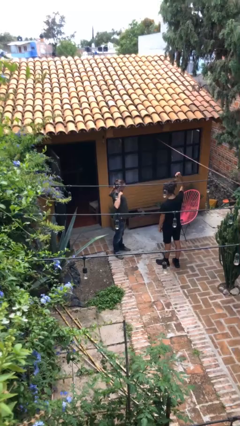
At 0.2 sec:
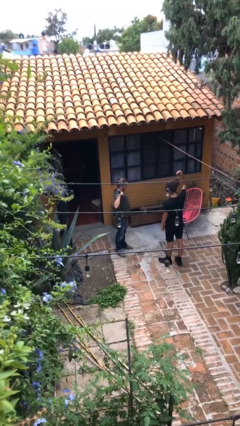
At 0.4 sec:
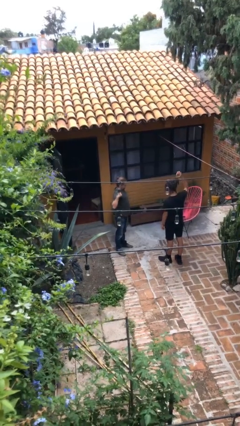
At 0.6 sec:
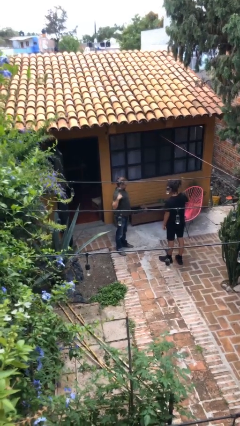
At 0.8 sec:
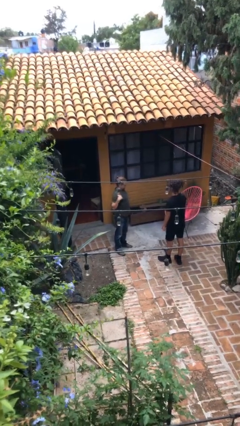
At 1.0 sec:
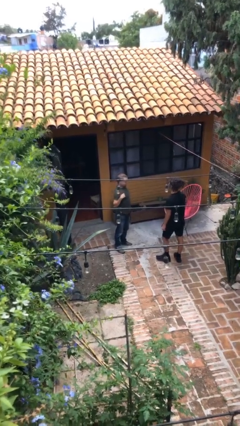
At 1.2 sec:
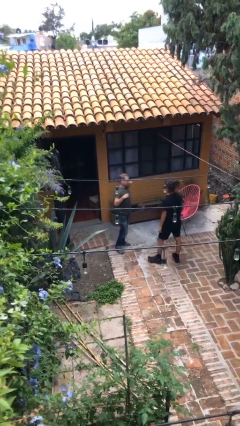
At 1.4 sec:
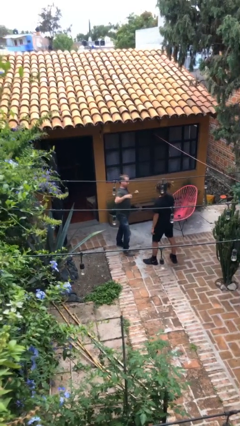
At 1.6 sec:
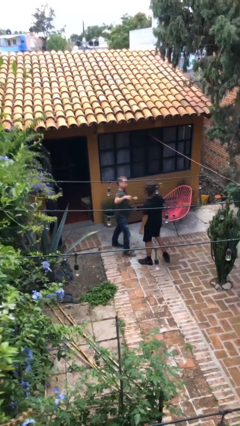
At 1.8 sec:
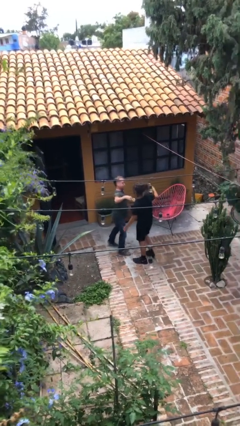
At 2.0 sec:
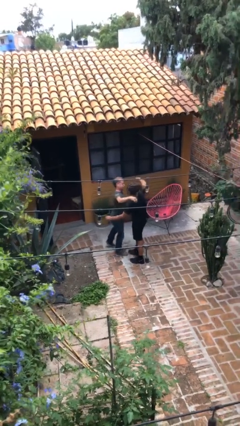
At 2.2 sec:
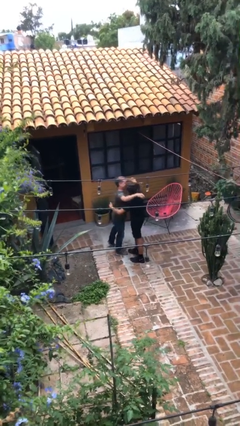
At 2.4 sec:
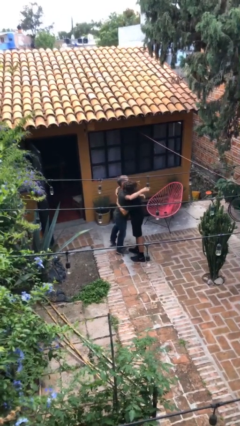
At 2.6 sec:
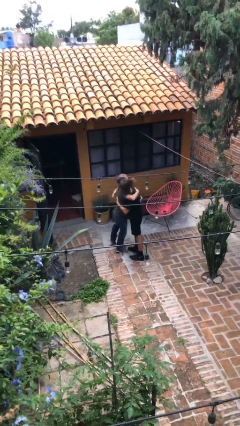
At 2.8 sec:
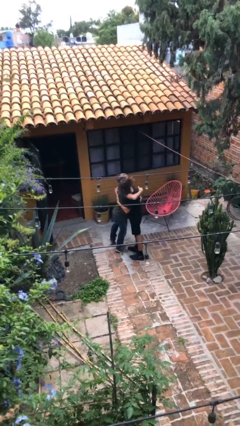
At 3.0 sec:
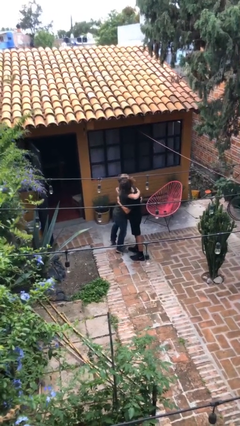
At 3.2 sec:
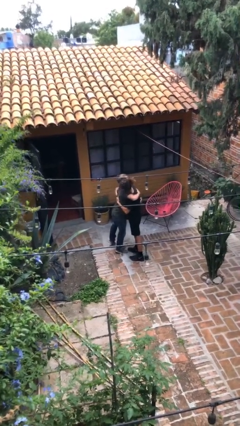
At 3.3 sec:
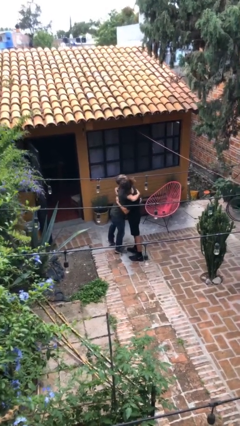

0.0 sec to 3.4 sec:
person embraces person

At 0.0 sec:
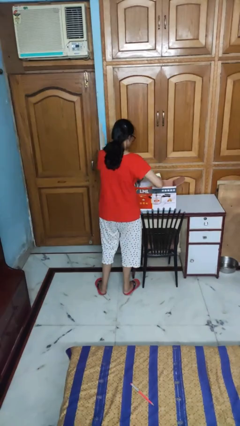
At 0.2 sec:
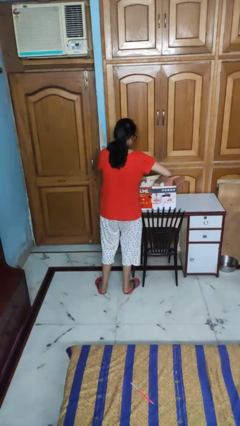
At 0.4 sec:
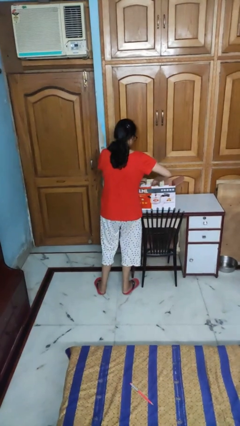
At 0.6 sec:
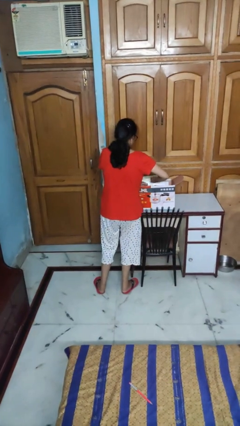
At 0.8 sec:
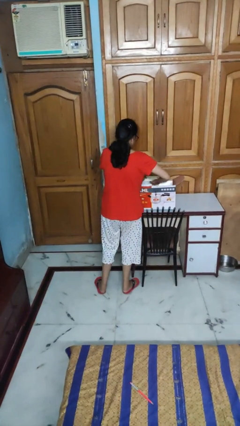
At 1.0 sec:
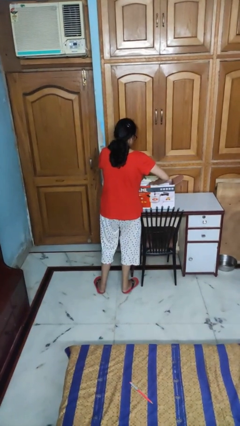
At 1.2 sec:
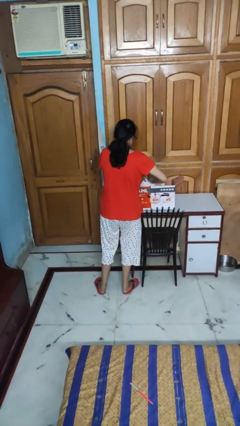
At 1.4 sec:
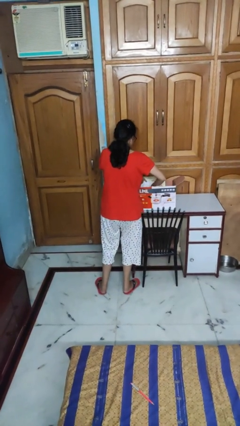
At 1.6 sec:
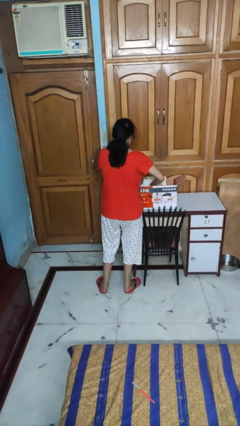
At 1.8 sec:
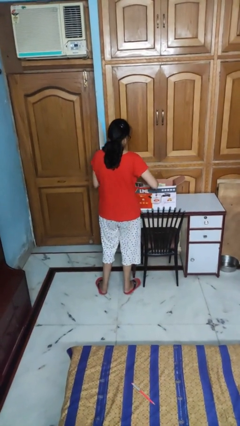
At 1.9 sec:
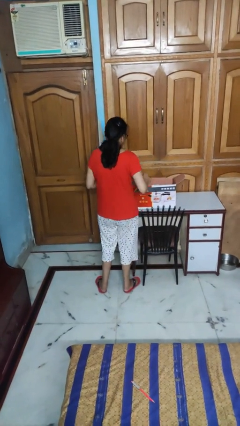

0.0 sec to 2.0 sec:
person searches in box

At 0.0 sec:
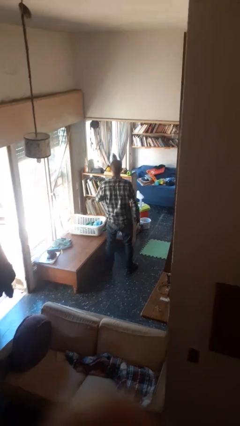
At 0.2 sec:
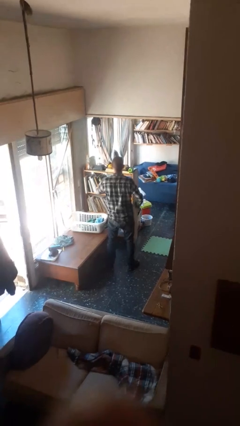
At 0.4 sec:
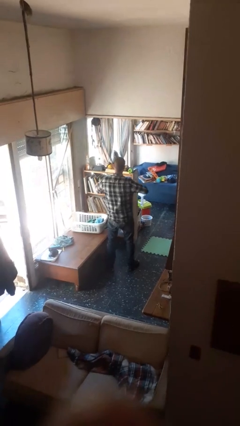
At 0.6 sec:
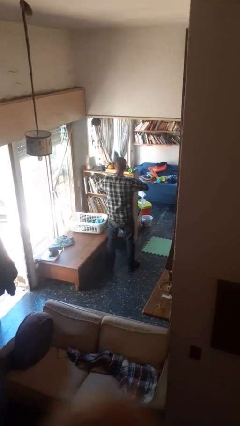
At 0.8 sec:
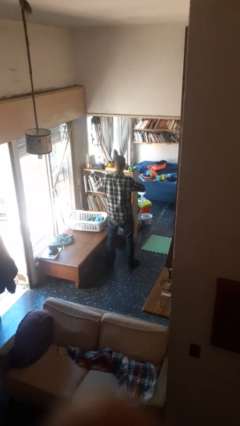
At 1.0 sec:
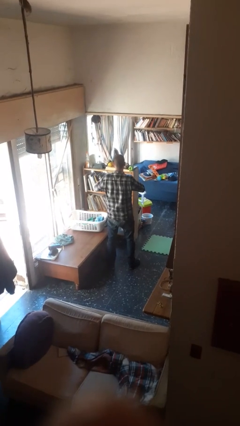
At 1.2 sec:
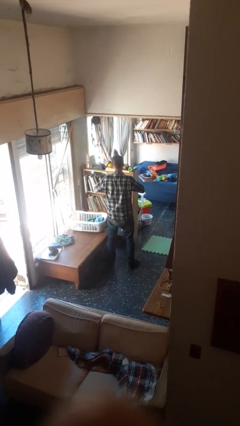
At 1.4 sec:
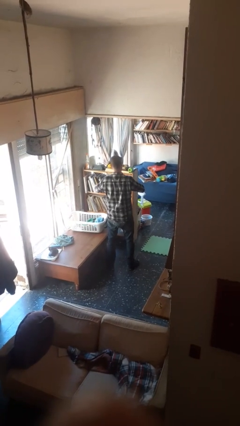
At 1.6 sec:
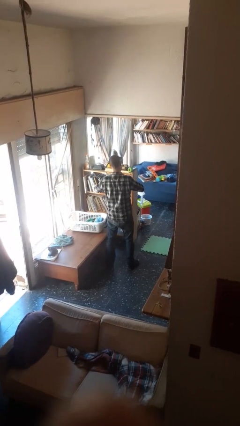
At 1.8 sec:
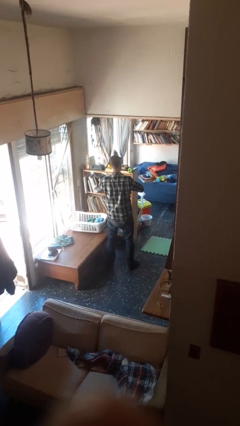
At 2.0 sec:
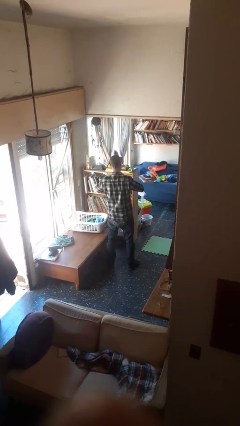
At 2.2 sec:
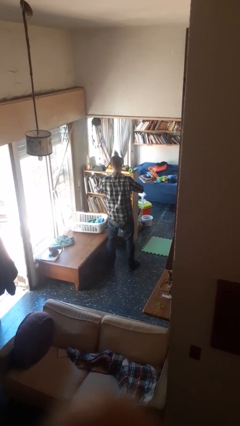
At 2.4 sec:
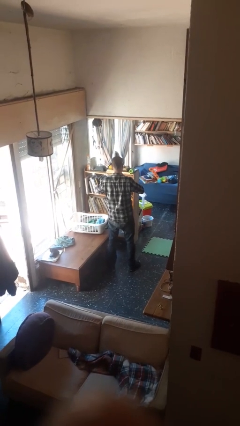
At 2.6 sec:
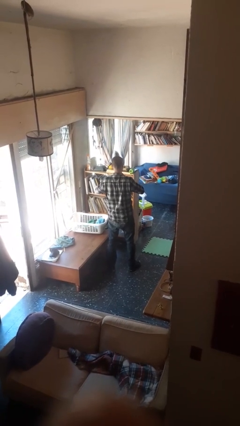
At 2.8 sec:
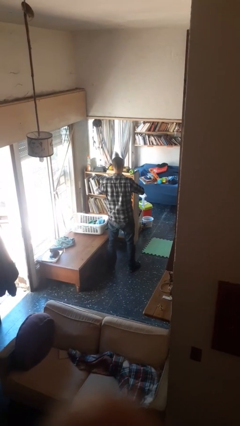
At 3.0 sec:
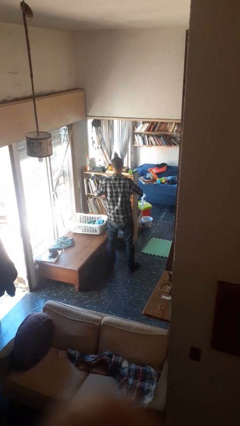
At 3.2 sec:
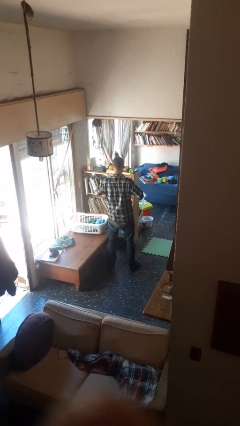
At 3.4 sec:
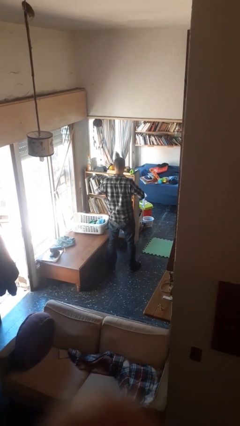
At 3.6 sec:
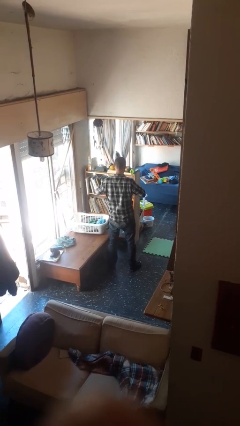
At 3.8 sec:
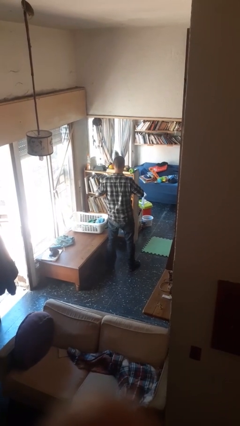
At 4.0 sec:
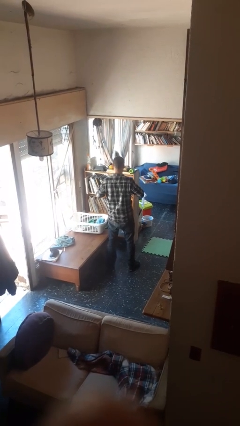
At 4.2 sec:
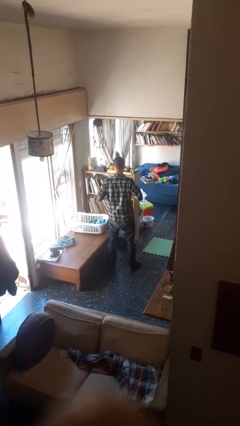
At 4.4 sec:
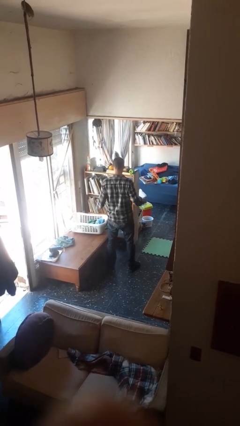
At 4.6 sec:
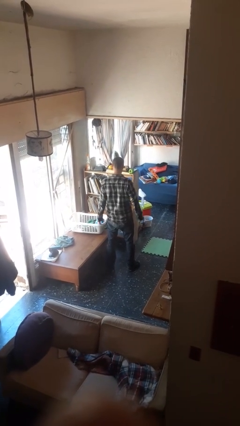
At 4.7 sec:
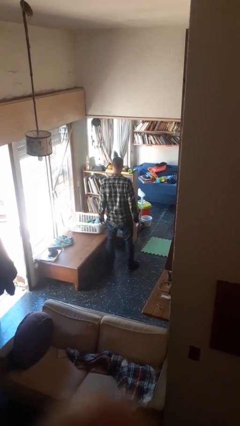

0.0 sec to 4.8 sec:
person unbuttons shirt

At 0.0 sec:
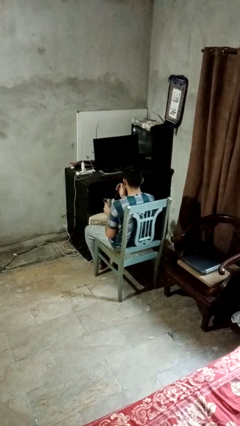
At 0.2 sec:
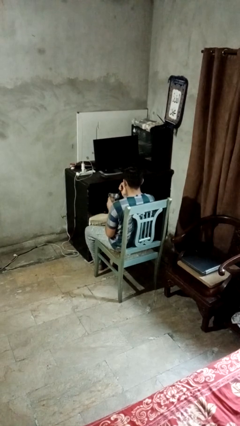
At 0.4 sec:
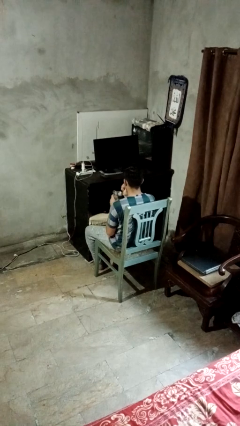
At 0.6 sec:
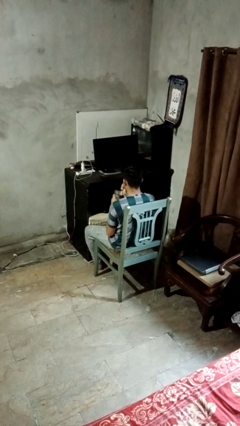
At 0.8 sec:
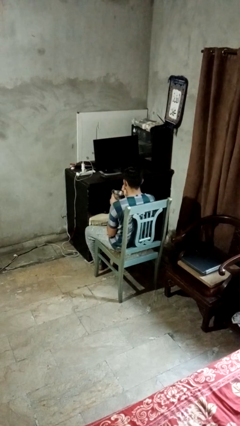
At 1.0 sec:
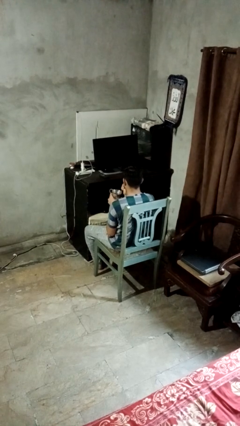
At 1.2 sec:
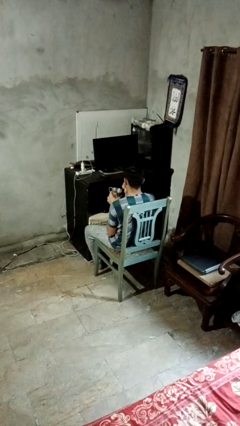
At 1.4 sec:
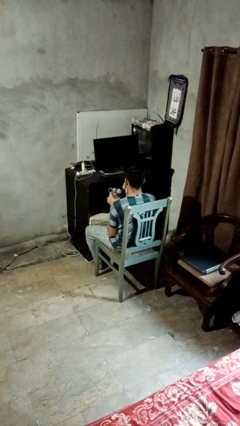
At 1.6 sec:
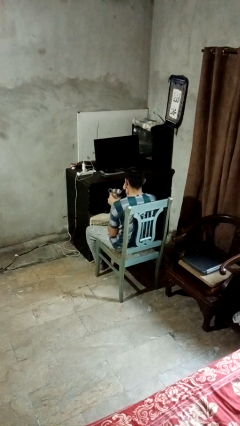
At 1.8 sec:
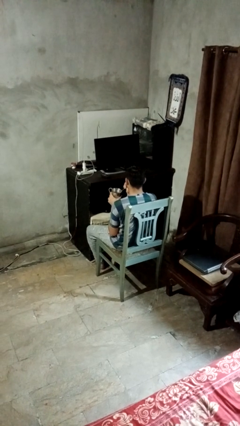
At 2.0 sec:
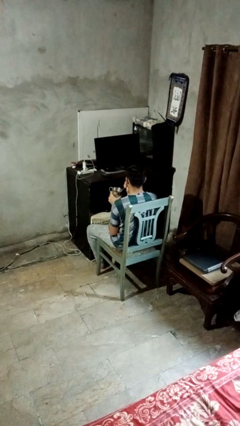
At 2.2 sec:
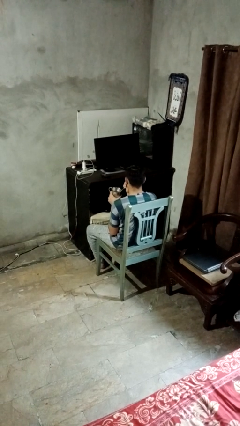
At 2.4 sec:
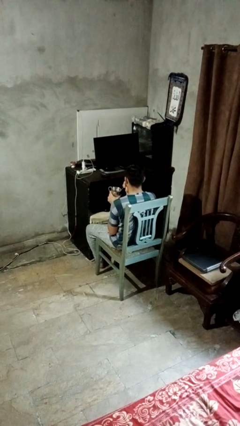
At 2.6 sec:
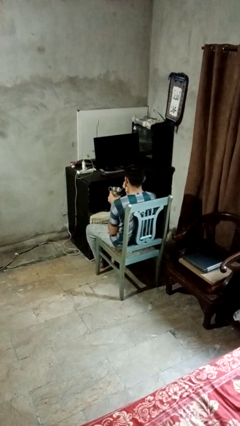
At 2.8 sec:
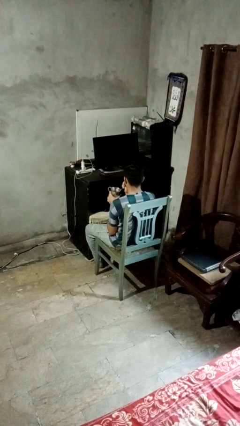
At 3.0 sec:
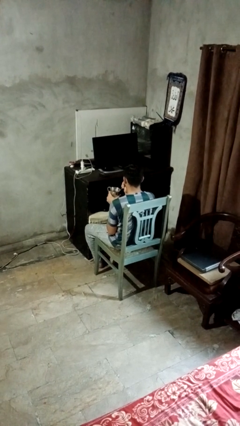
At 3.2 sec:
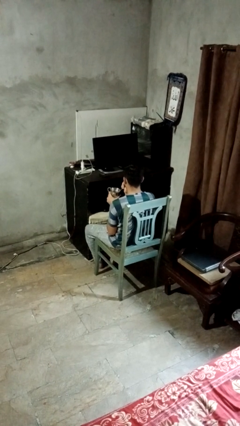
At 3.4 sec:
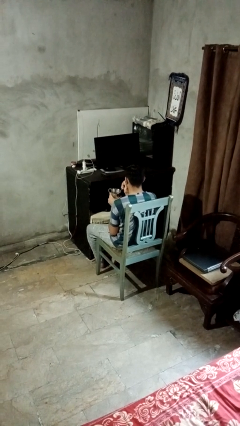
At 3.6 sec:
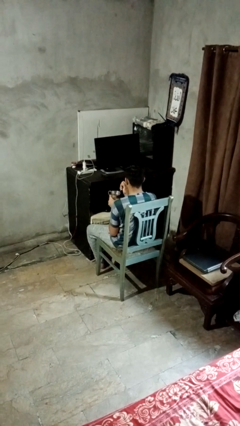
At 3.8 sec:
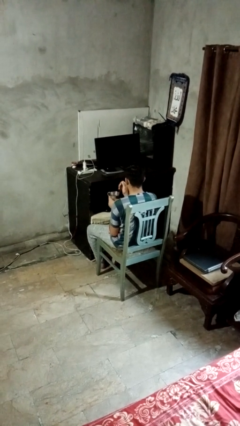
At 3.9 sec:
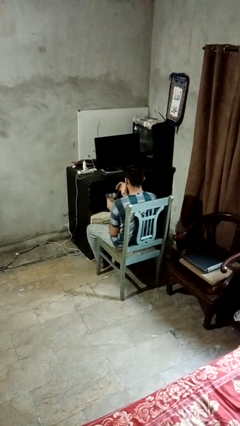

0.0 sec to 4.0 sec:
person drinks from straw

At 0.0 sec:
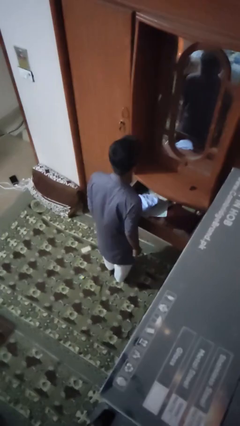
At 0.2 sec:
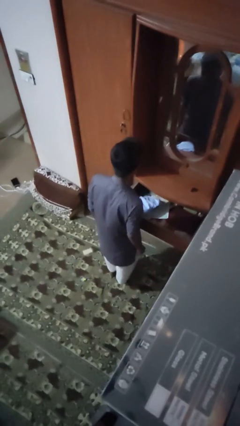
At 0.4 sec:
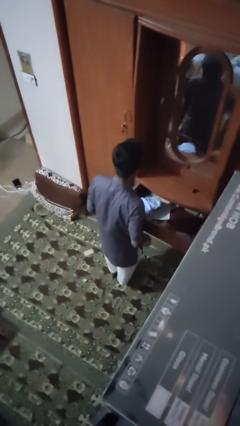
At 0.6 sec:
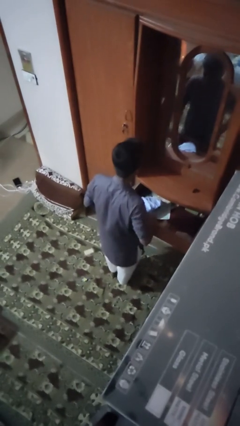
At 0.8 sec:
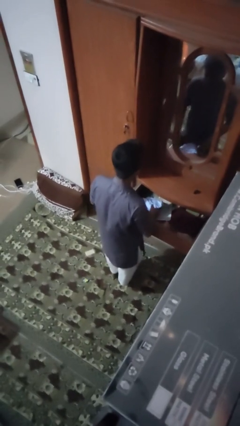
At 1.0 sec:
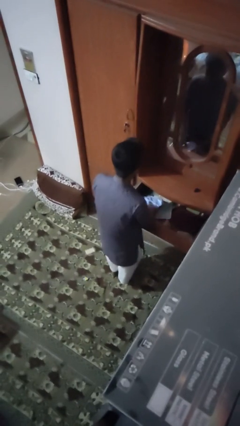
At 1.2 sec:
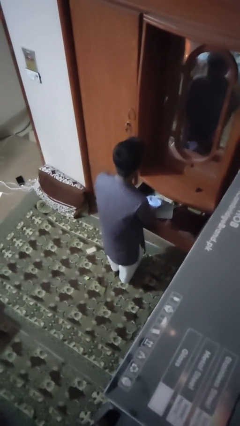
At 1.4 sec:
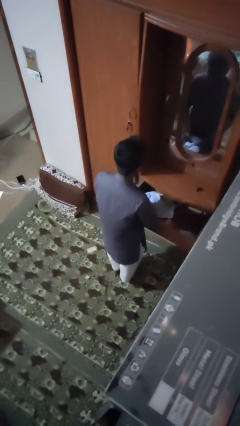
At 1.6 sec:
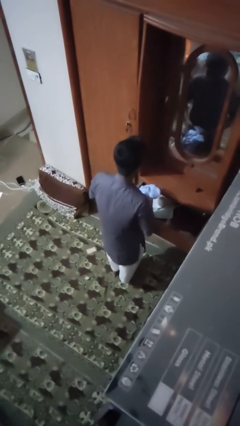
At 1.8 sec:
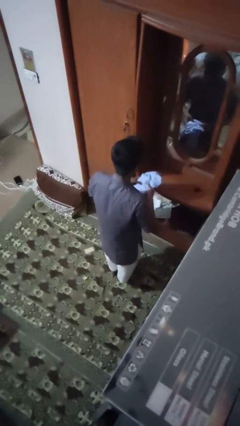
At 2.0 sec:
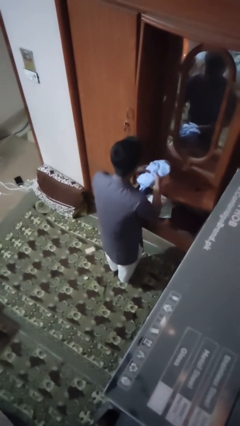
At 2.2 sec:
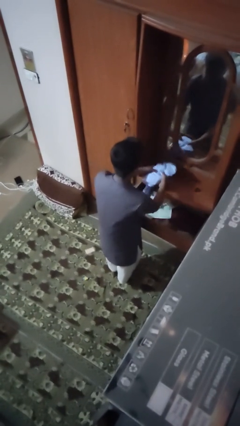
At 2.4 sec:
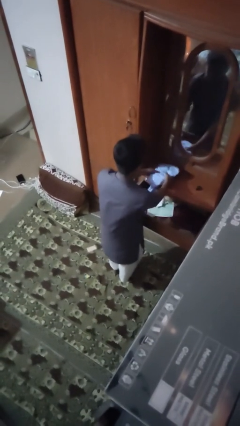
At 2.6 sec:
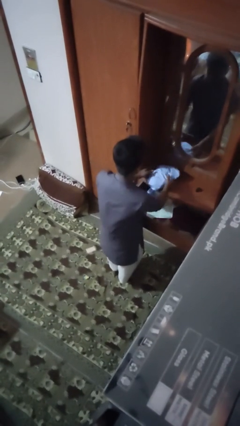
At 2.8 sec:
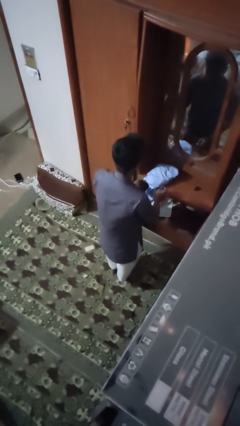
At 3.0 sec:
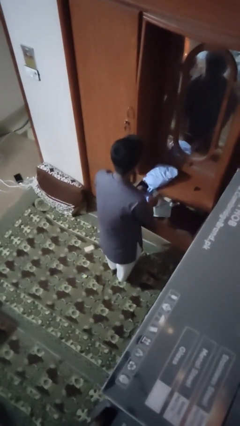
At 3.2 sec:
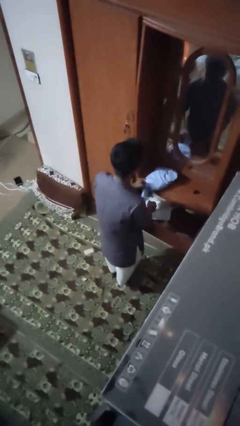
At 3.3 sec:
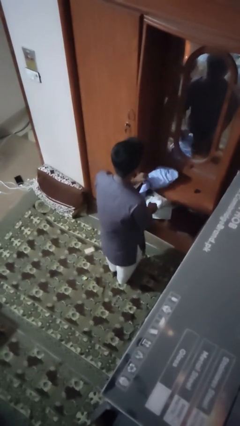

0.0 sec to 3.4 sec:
person takes clothes from dresser
